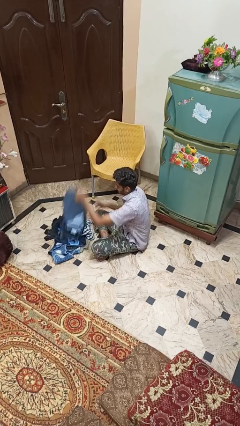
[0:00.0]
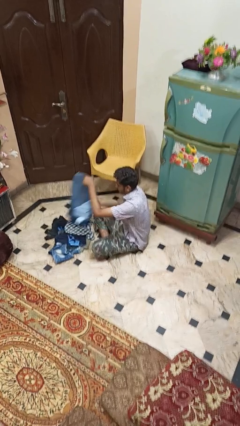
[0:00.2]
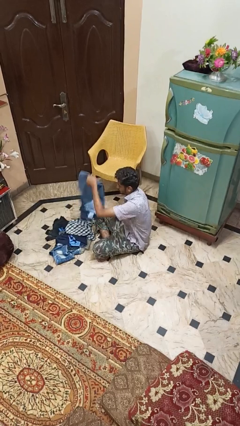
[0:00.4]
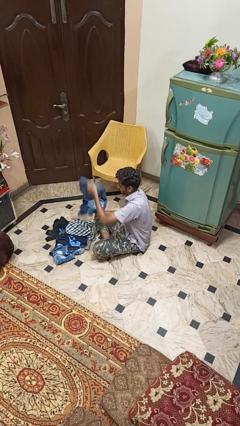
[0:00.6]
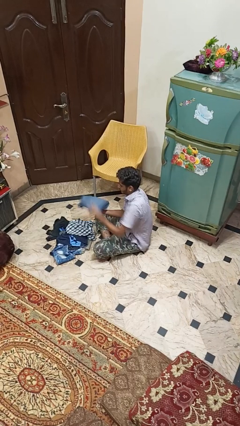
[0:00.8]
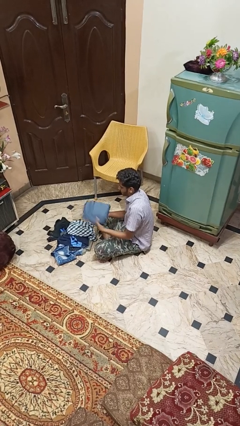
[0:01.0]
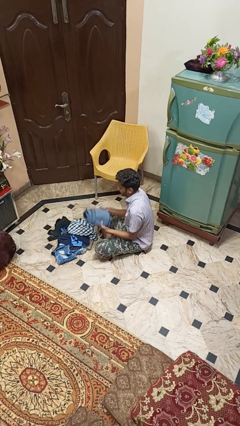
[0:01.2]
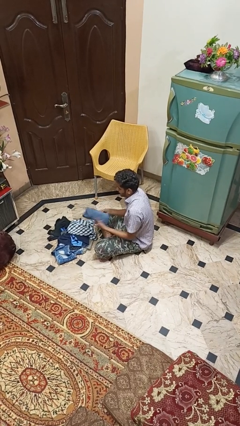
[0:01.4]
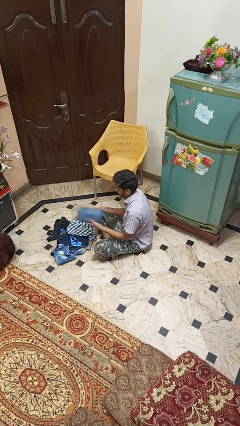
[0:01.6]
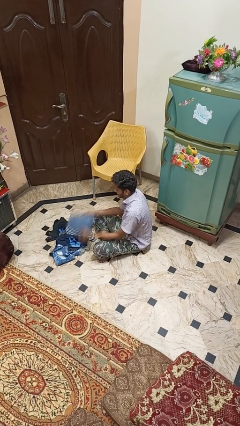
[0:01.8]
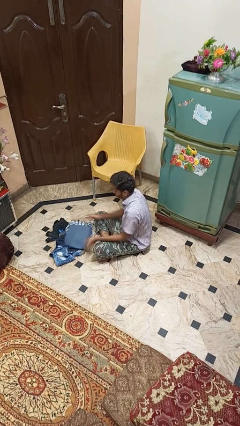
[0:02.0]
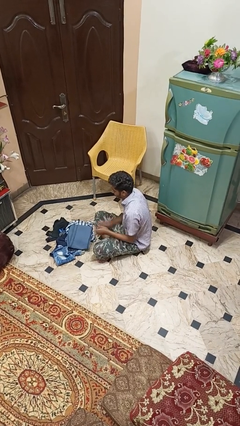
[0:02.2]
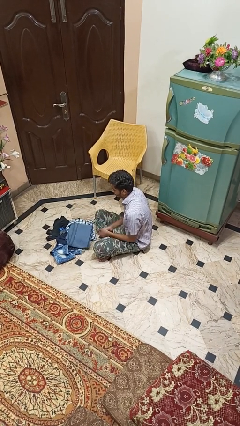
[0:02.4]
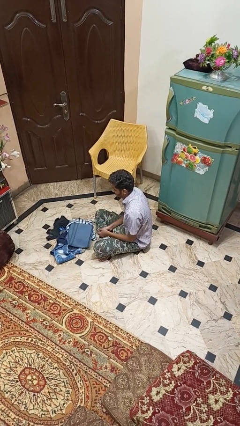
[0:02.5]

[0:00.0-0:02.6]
person folds pants

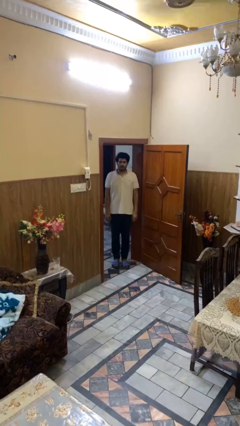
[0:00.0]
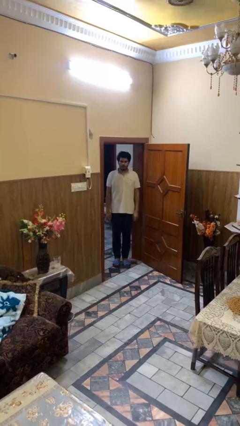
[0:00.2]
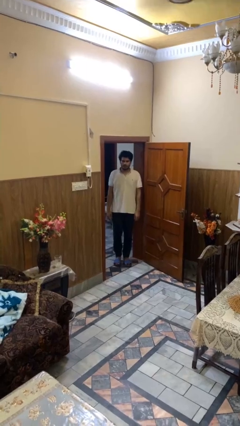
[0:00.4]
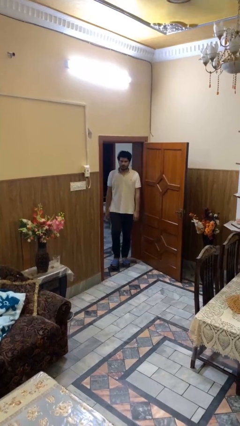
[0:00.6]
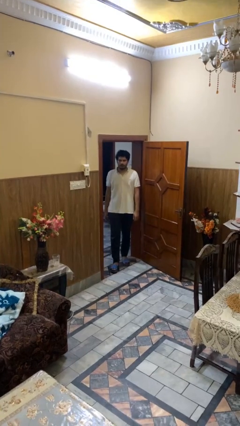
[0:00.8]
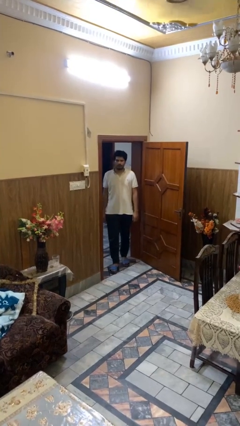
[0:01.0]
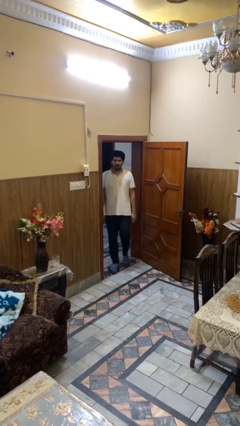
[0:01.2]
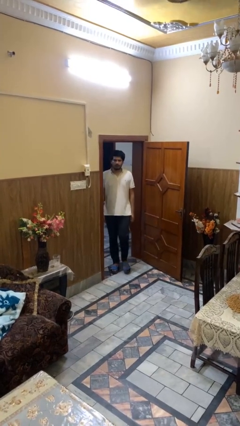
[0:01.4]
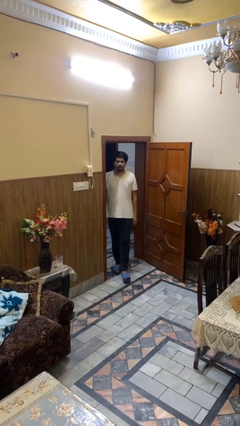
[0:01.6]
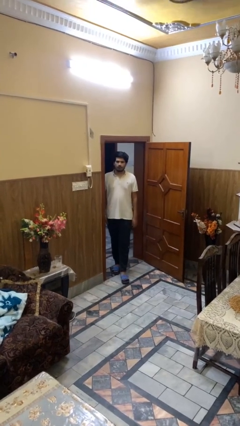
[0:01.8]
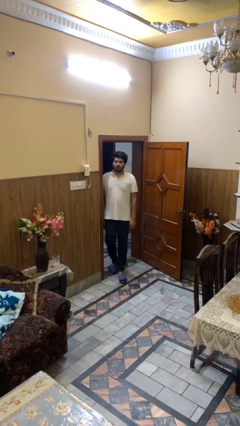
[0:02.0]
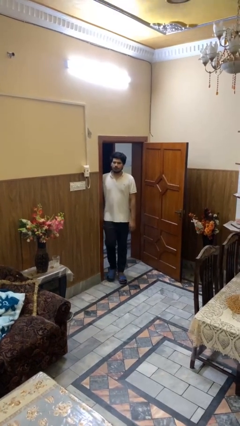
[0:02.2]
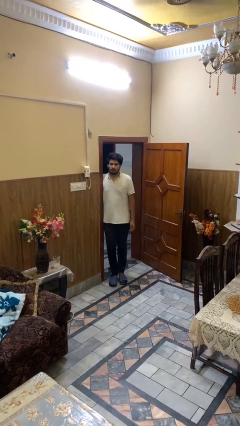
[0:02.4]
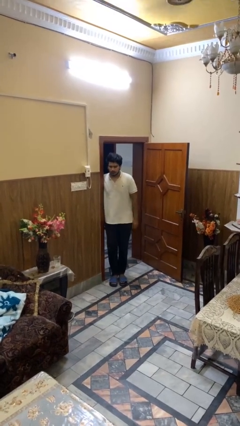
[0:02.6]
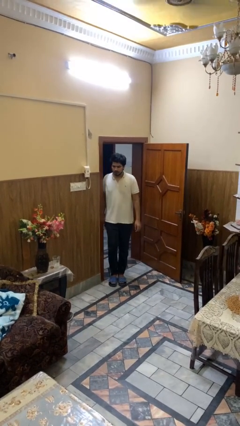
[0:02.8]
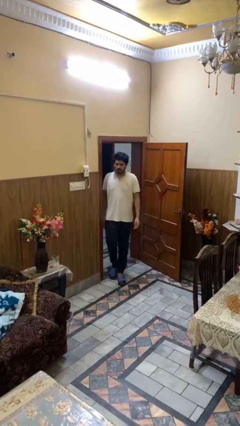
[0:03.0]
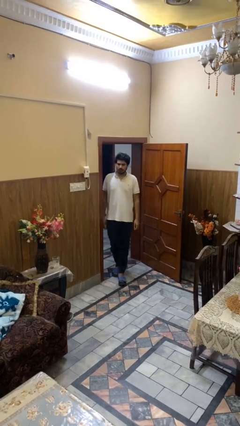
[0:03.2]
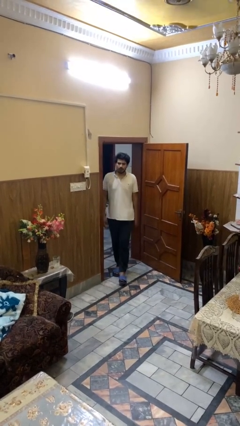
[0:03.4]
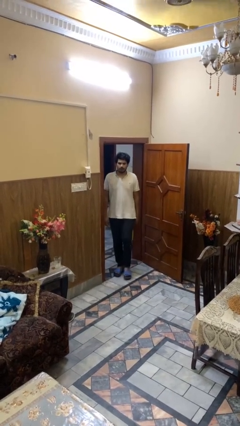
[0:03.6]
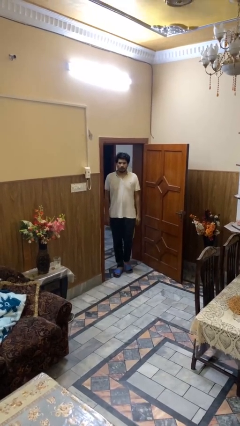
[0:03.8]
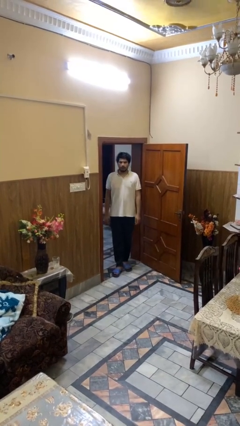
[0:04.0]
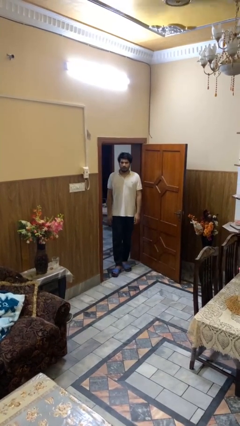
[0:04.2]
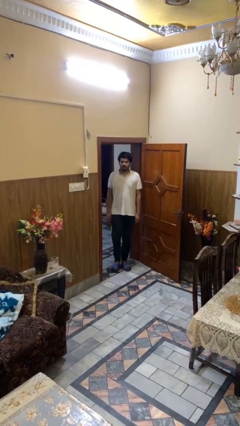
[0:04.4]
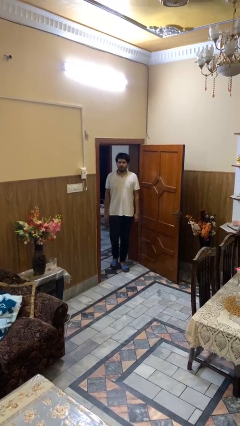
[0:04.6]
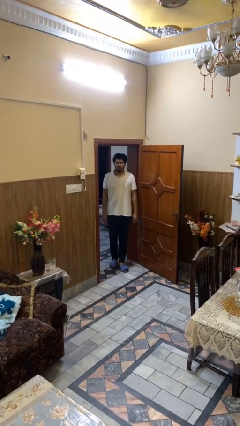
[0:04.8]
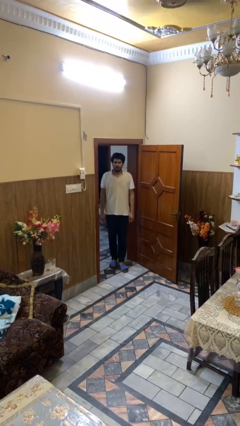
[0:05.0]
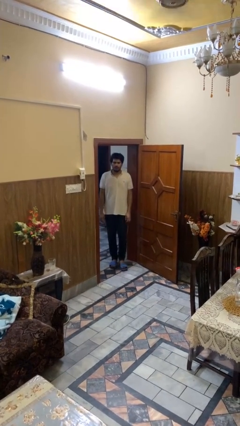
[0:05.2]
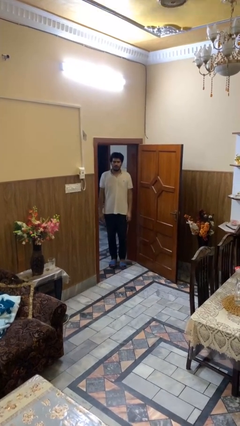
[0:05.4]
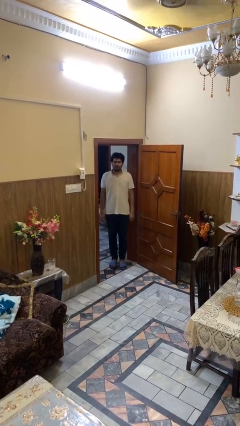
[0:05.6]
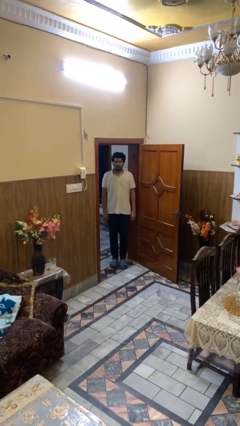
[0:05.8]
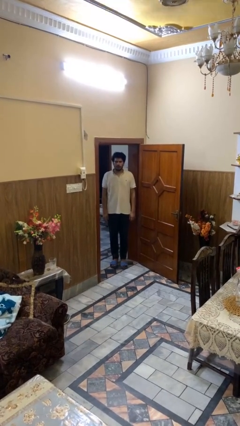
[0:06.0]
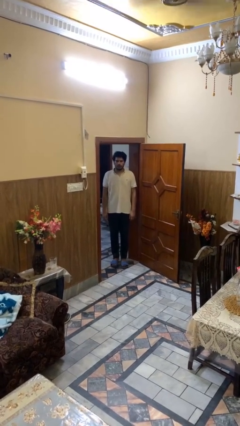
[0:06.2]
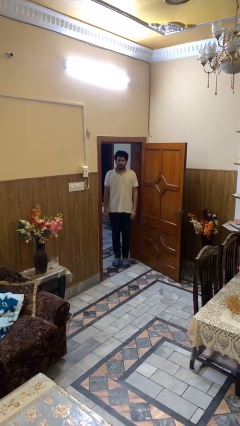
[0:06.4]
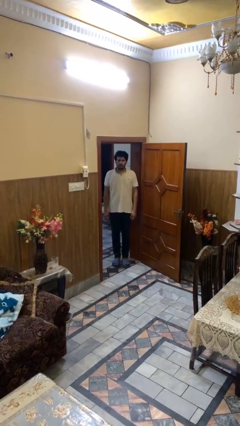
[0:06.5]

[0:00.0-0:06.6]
person bumps into wall

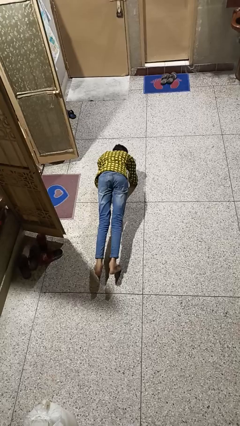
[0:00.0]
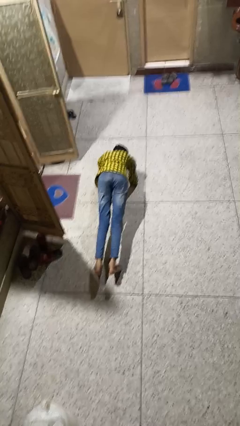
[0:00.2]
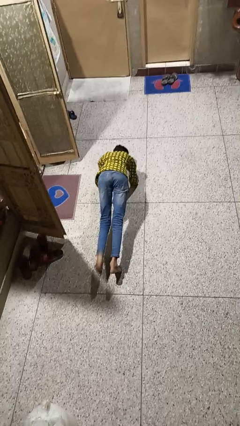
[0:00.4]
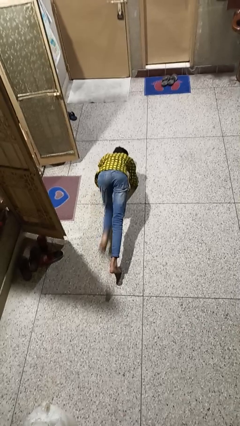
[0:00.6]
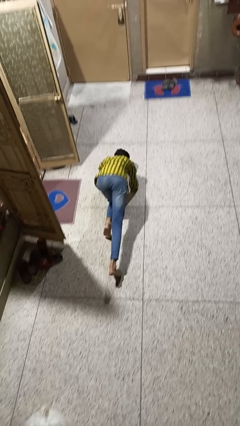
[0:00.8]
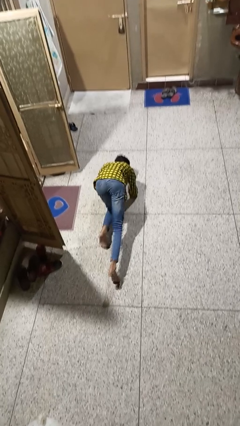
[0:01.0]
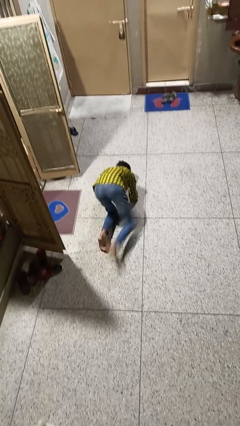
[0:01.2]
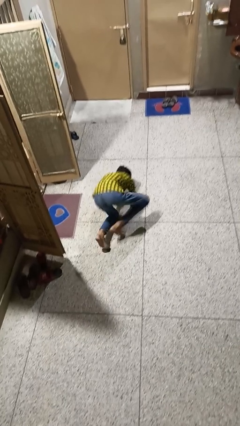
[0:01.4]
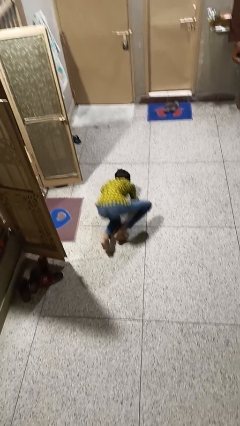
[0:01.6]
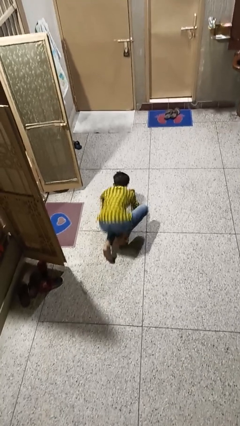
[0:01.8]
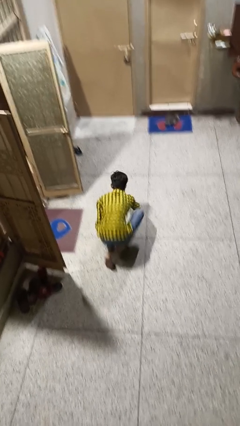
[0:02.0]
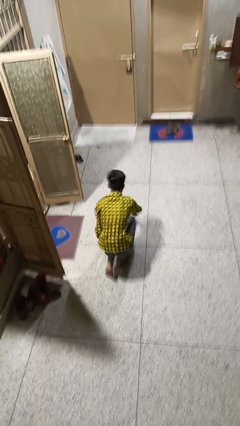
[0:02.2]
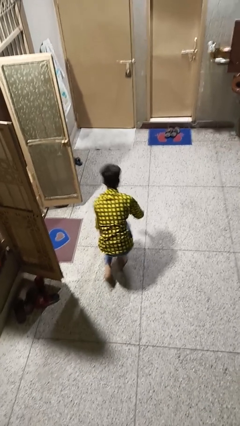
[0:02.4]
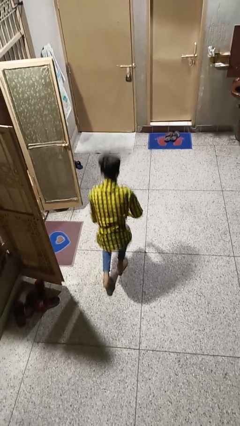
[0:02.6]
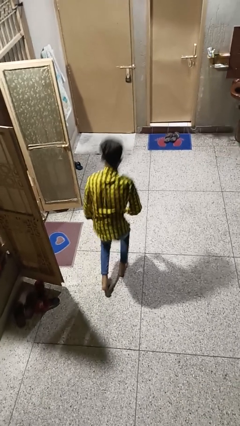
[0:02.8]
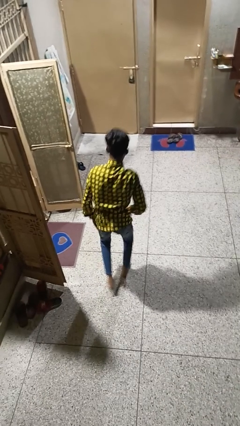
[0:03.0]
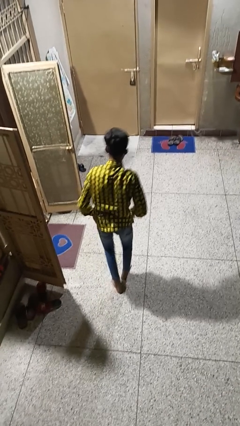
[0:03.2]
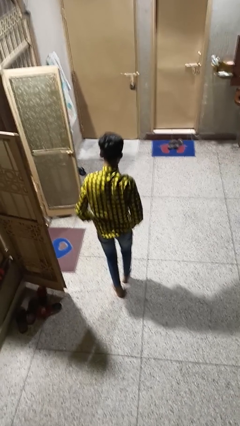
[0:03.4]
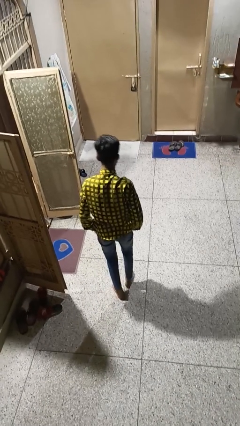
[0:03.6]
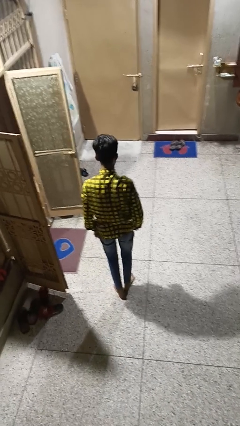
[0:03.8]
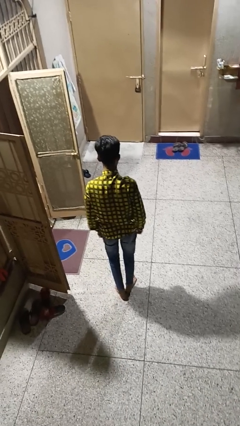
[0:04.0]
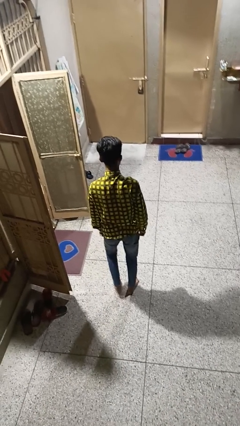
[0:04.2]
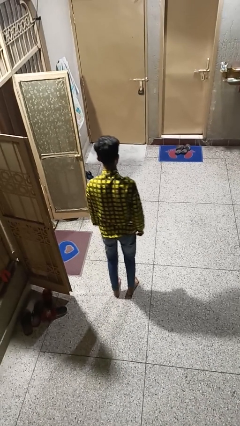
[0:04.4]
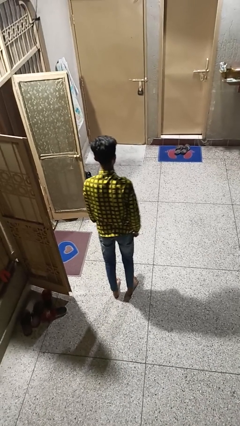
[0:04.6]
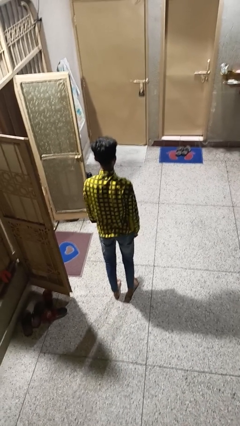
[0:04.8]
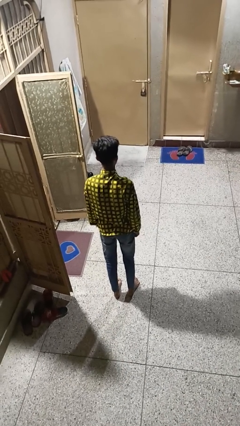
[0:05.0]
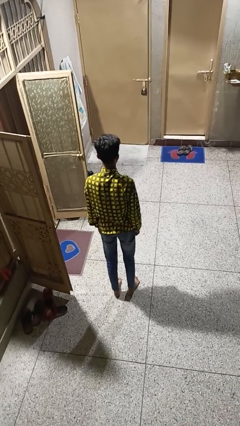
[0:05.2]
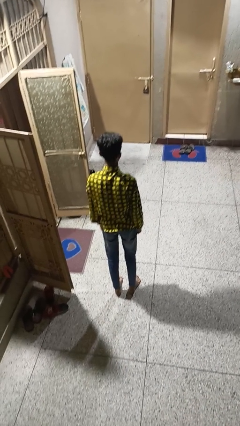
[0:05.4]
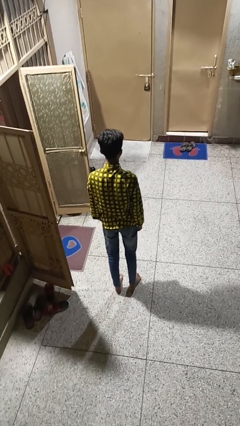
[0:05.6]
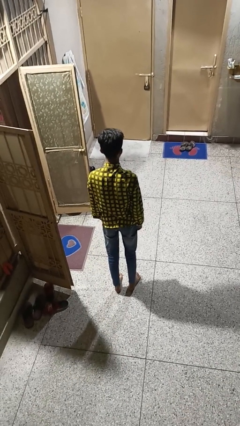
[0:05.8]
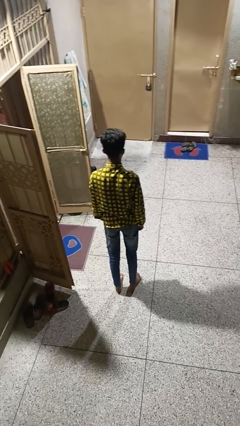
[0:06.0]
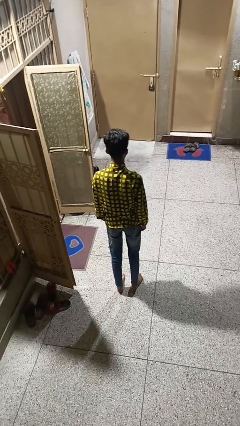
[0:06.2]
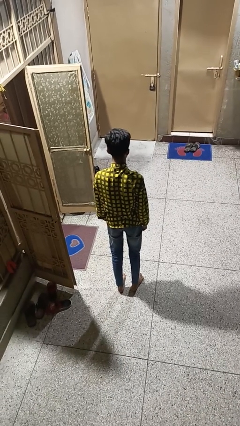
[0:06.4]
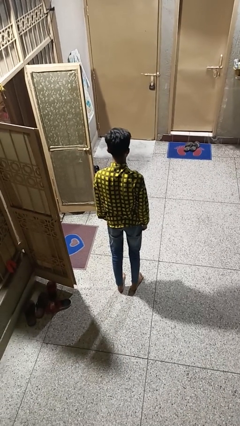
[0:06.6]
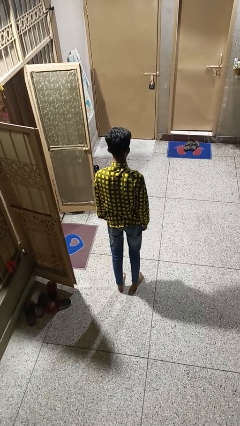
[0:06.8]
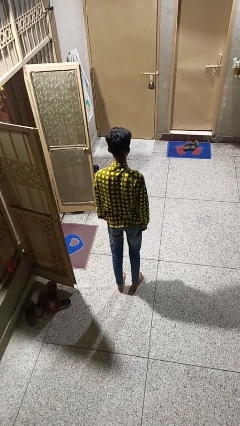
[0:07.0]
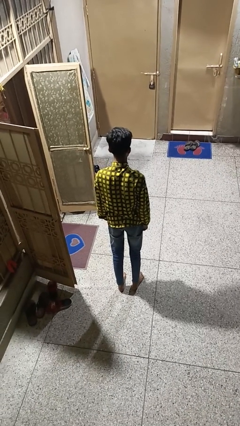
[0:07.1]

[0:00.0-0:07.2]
person stands up from floor

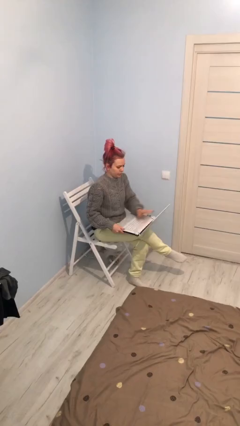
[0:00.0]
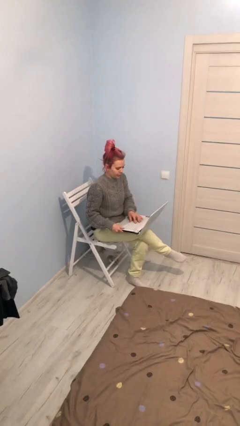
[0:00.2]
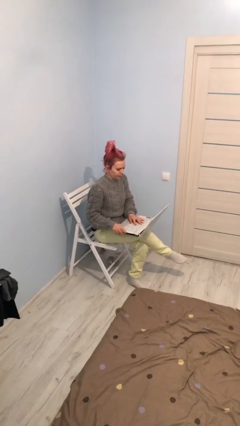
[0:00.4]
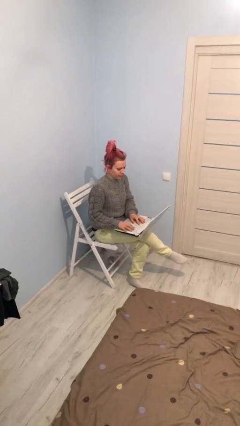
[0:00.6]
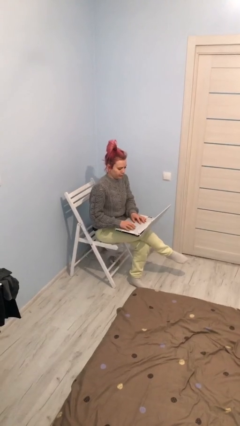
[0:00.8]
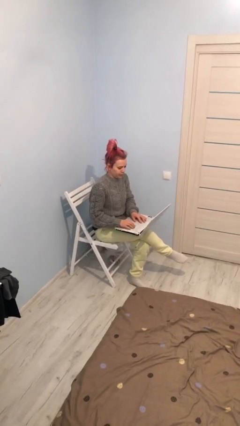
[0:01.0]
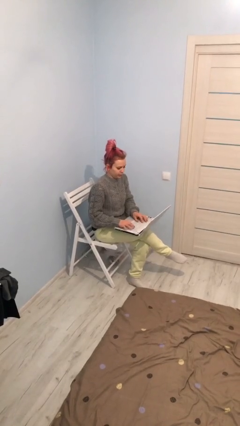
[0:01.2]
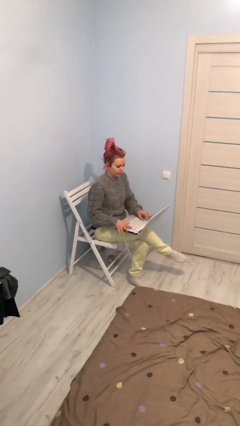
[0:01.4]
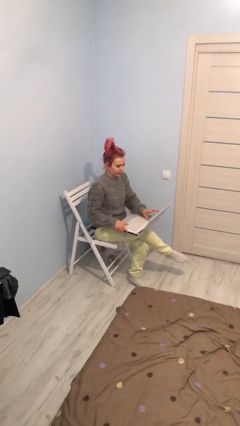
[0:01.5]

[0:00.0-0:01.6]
person interacts with laptop
